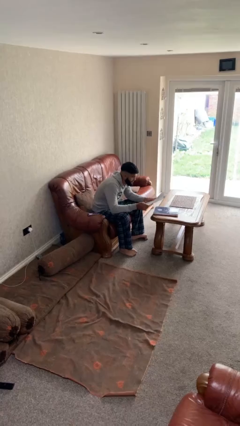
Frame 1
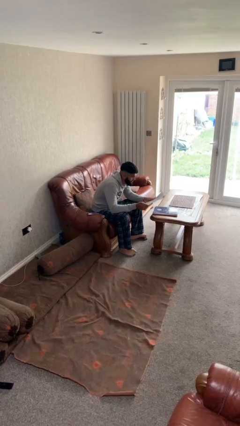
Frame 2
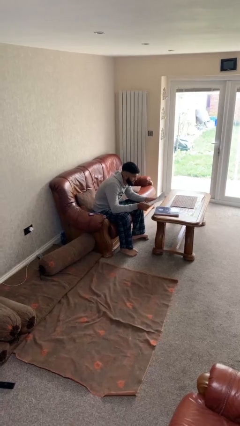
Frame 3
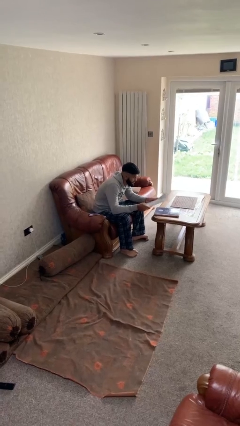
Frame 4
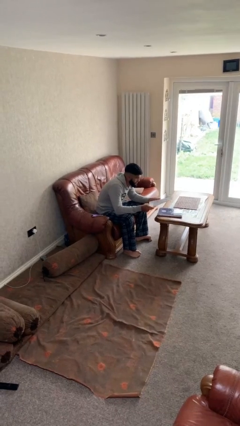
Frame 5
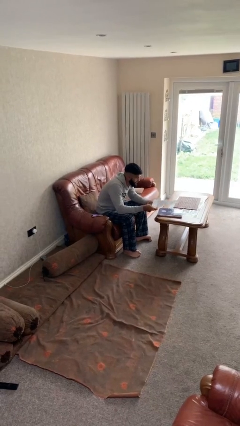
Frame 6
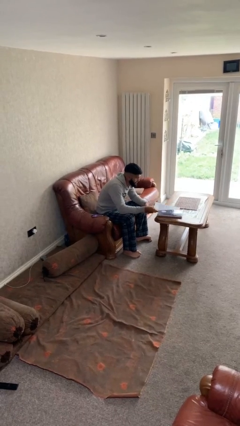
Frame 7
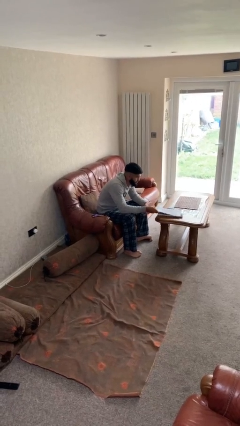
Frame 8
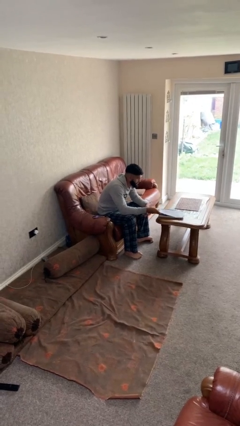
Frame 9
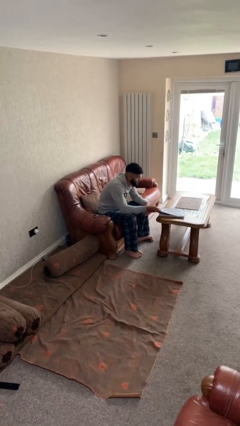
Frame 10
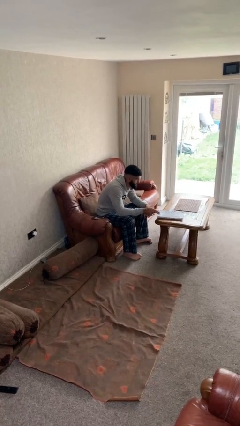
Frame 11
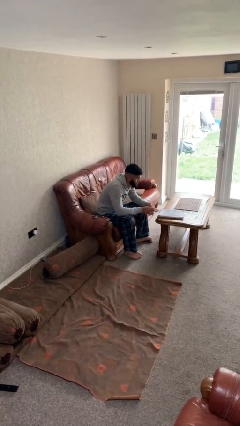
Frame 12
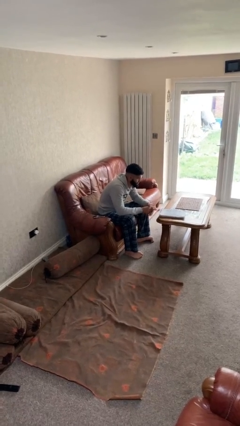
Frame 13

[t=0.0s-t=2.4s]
person puts down object on table

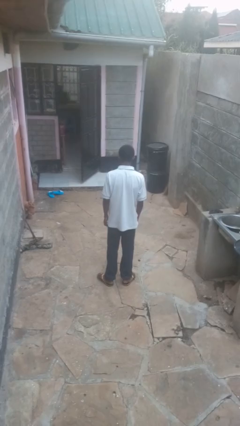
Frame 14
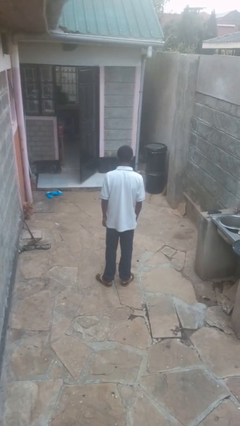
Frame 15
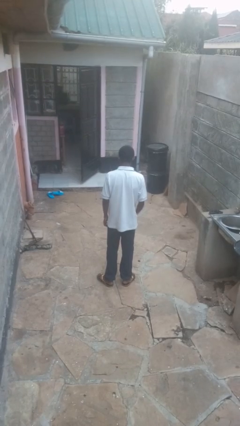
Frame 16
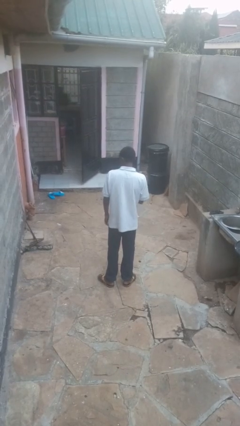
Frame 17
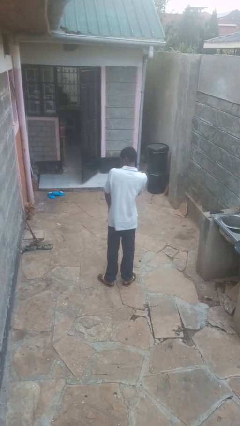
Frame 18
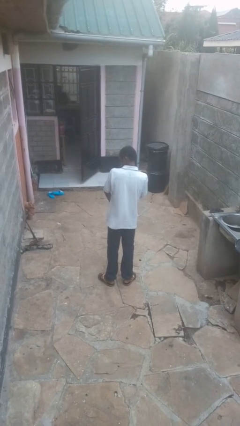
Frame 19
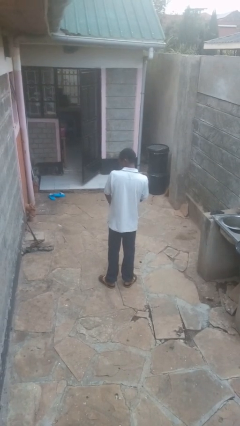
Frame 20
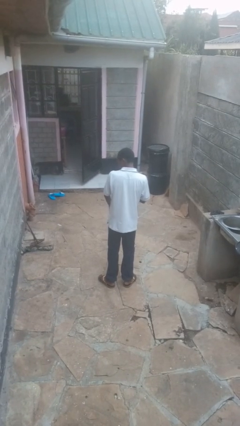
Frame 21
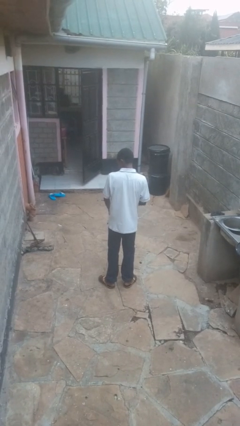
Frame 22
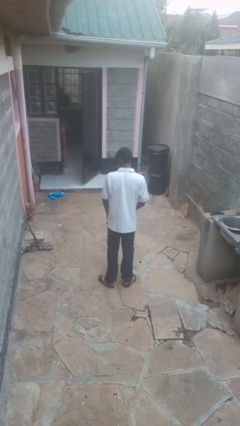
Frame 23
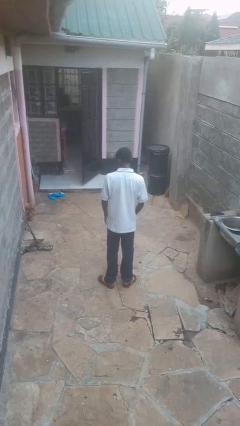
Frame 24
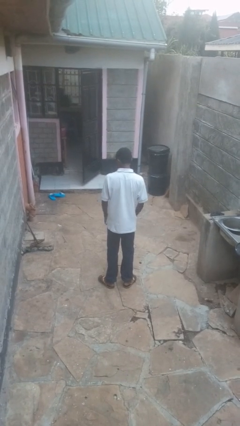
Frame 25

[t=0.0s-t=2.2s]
person swats bug

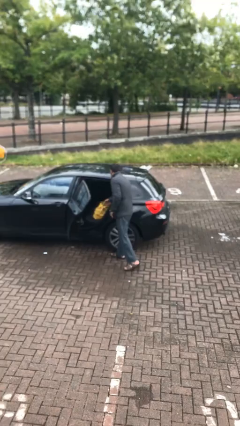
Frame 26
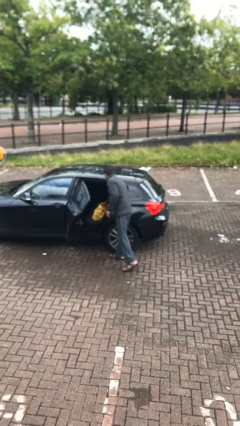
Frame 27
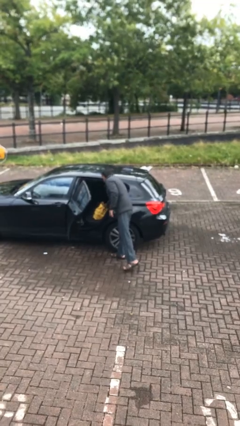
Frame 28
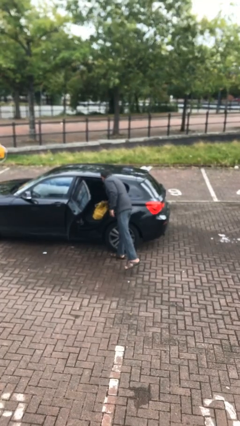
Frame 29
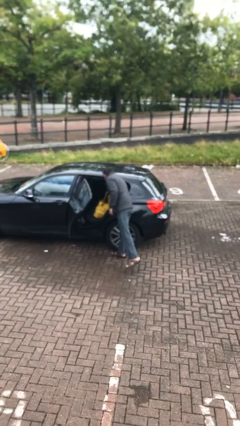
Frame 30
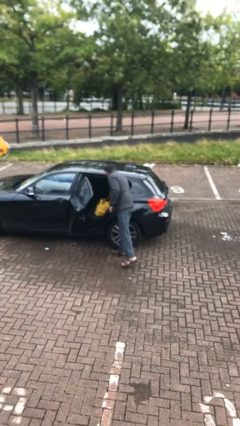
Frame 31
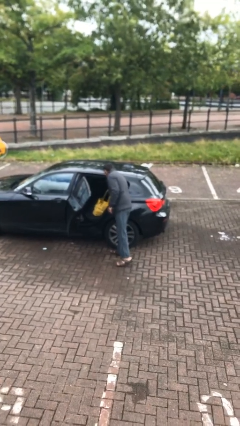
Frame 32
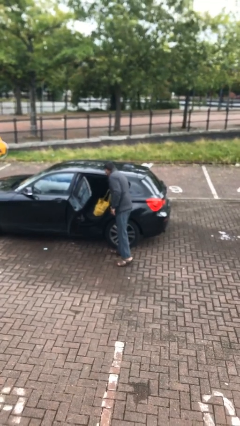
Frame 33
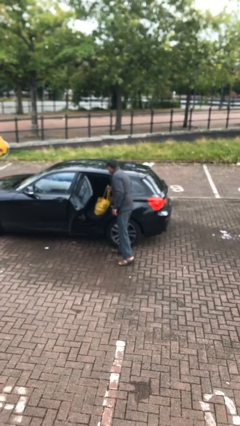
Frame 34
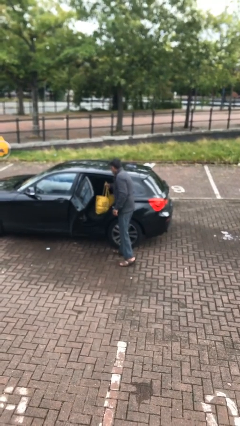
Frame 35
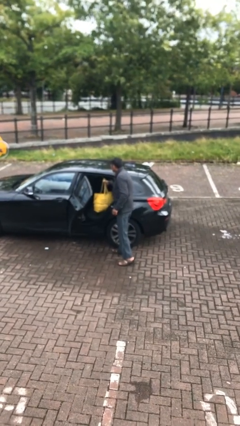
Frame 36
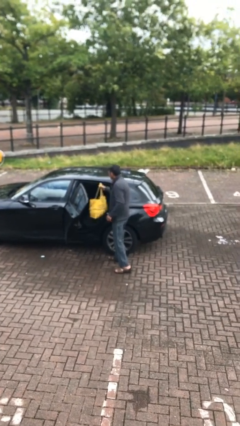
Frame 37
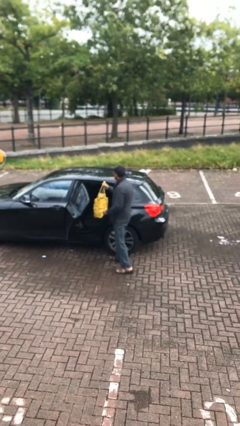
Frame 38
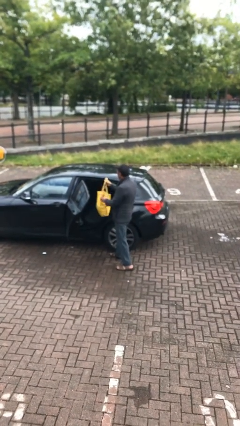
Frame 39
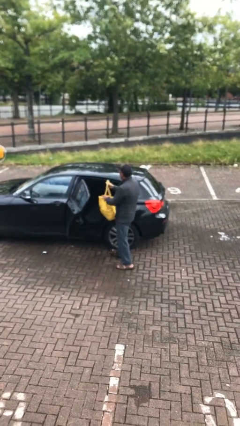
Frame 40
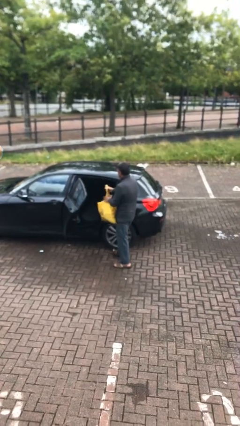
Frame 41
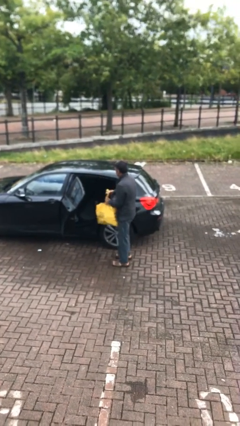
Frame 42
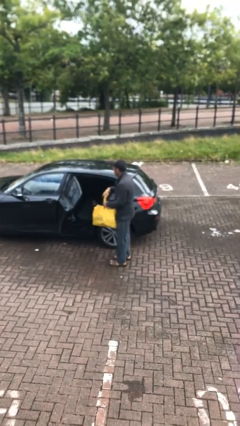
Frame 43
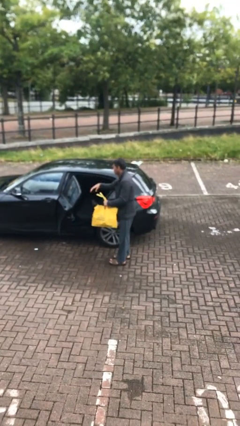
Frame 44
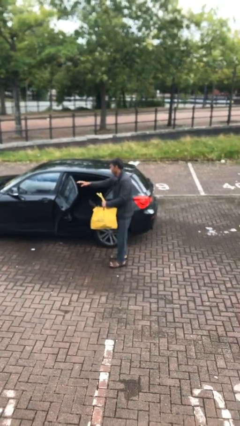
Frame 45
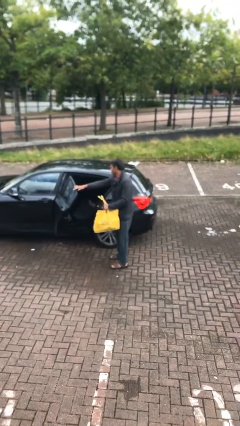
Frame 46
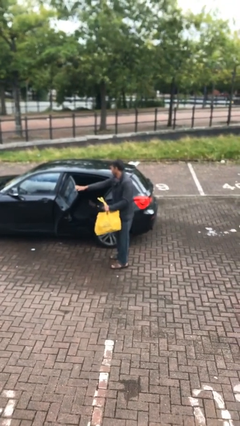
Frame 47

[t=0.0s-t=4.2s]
person unloads car

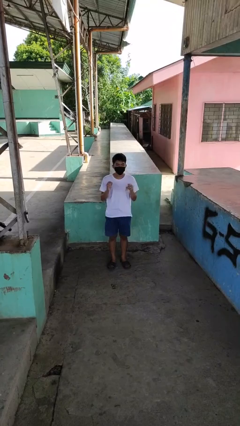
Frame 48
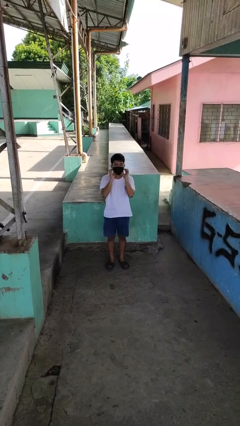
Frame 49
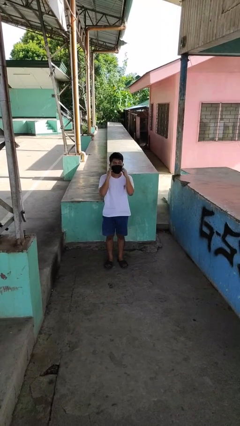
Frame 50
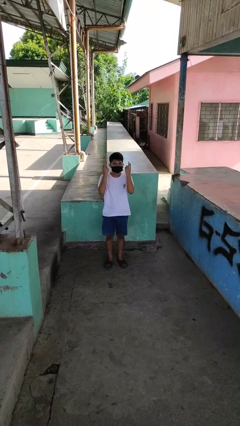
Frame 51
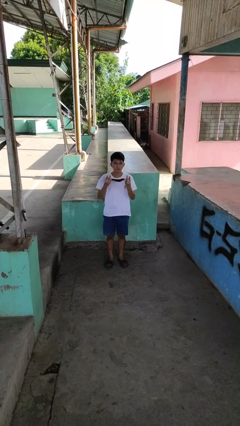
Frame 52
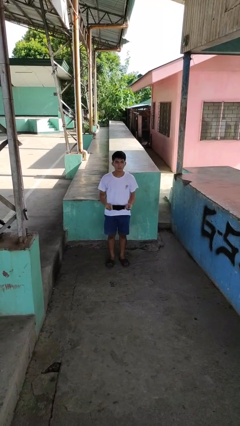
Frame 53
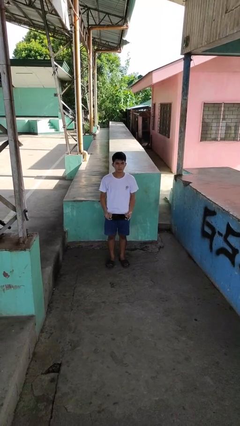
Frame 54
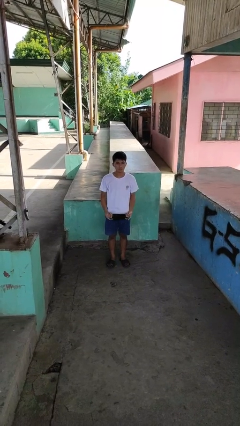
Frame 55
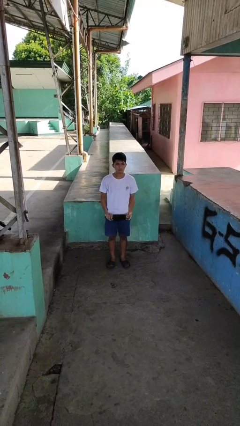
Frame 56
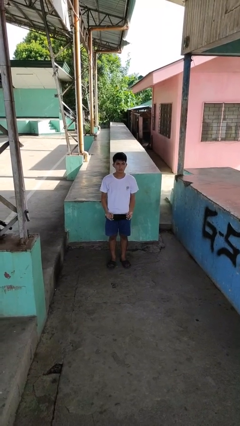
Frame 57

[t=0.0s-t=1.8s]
person takes off facemask

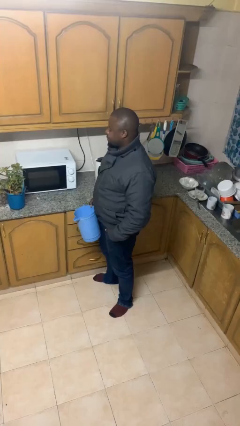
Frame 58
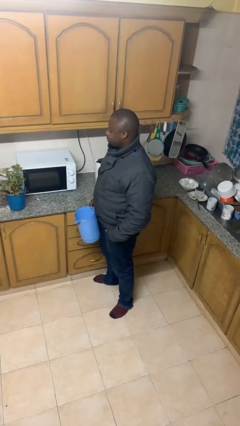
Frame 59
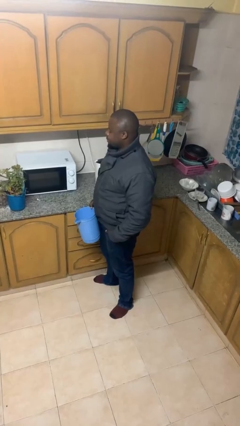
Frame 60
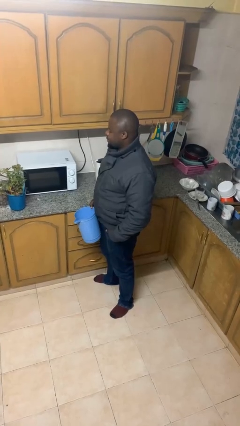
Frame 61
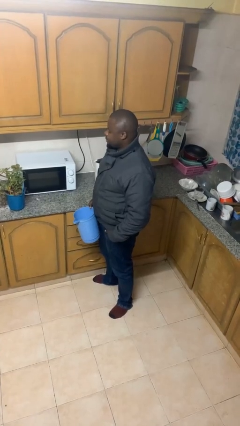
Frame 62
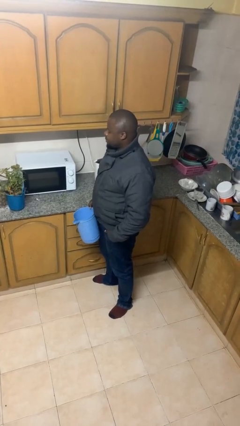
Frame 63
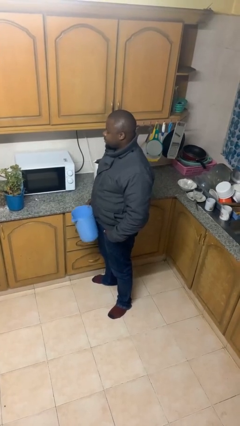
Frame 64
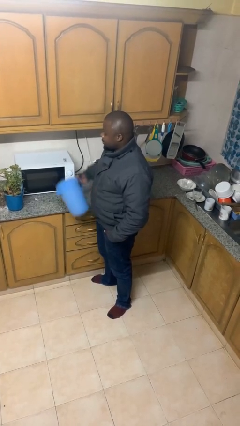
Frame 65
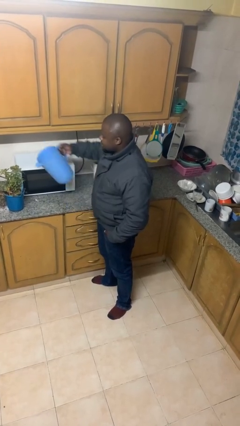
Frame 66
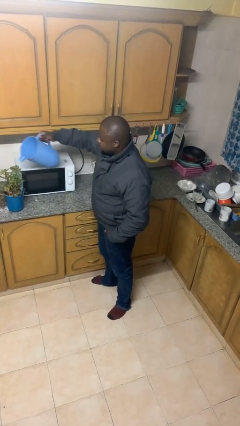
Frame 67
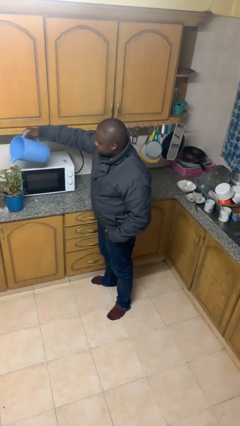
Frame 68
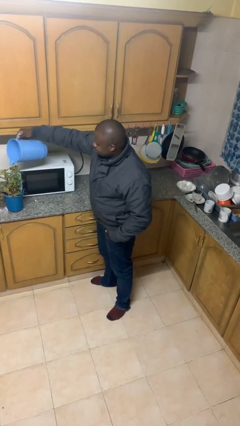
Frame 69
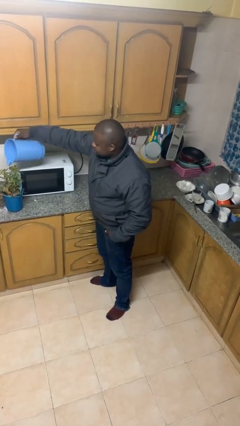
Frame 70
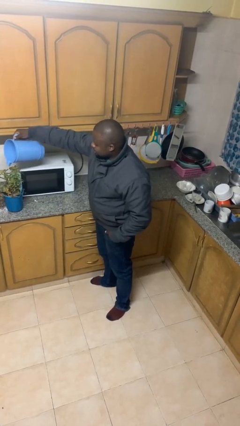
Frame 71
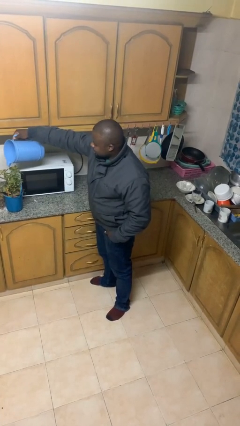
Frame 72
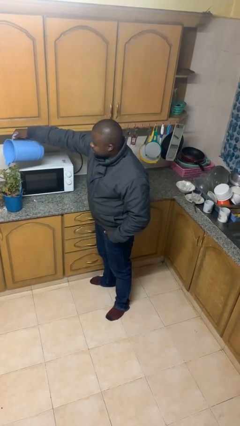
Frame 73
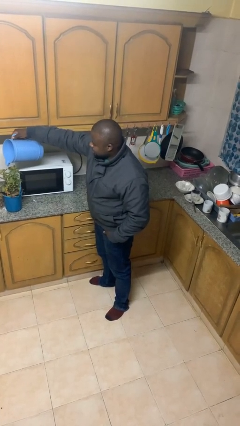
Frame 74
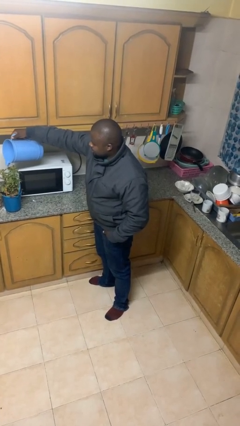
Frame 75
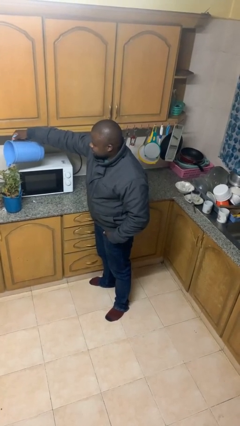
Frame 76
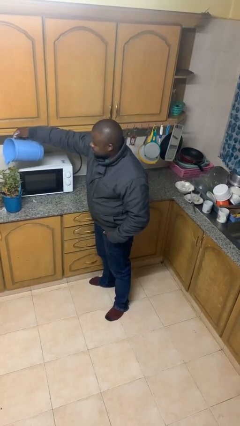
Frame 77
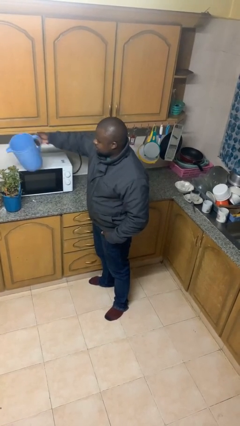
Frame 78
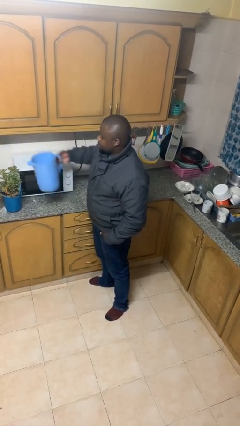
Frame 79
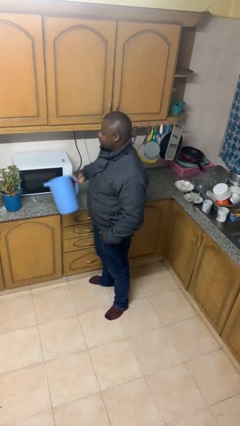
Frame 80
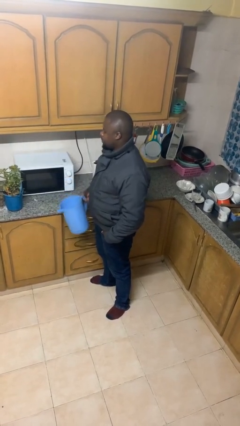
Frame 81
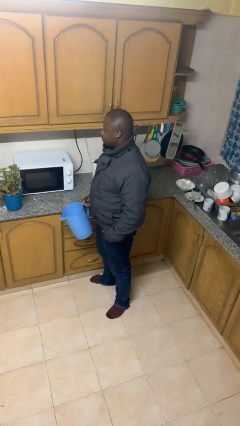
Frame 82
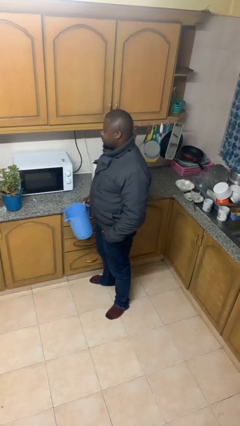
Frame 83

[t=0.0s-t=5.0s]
person waters houseplant

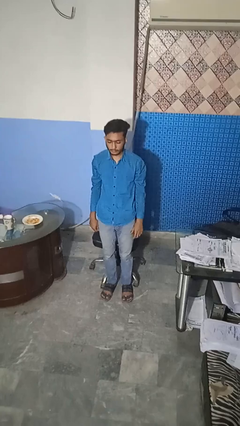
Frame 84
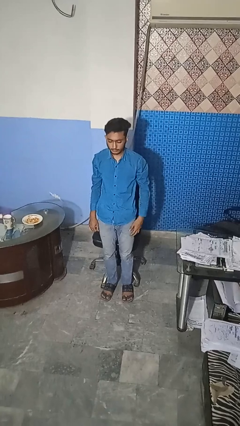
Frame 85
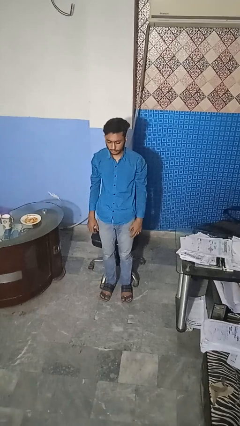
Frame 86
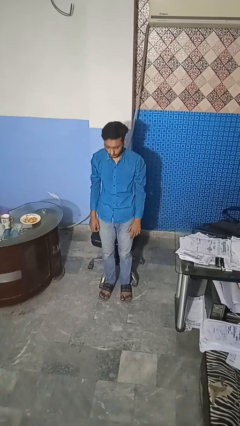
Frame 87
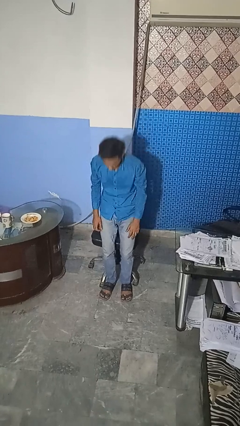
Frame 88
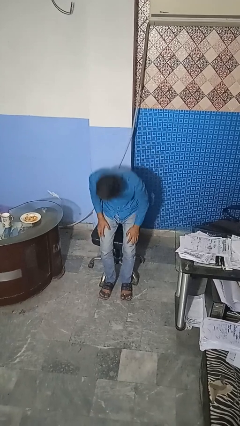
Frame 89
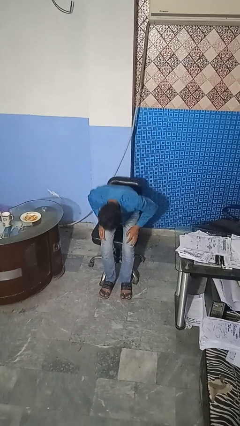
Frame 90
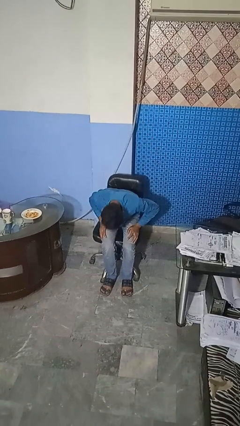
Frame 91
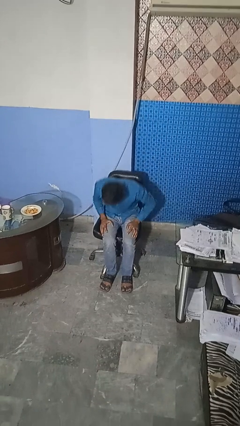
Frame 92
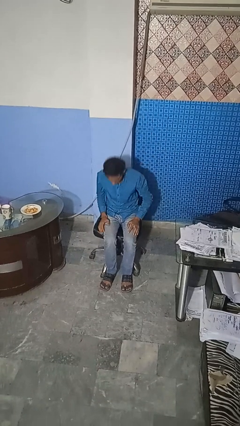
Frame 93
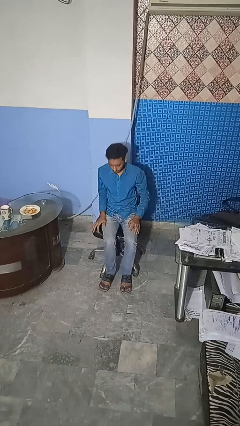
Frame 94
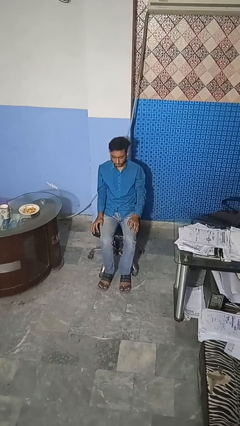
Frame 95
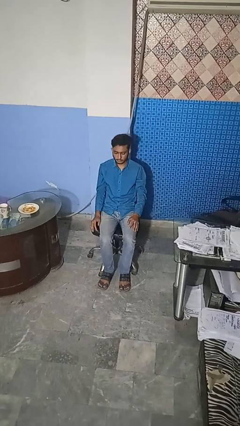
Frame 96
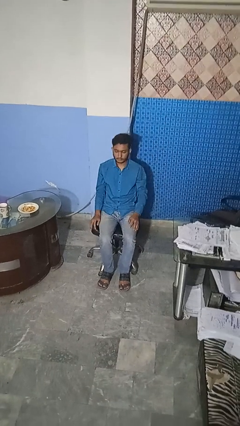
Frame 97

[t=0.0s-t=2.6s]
person sits down
